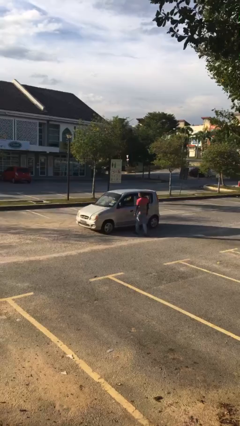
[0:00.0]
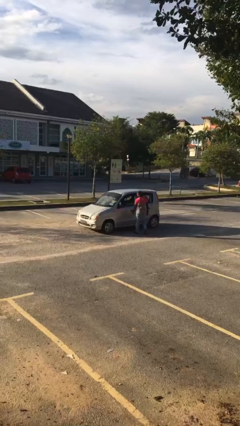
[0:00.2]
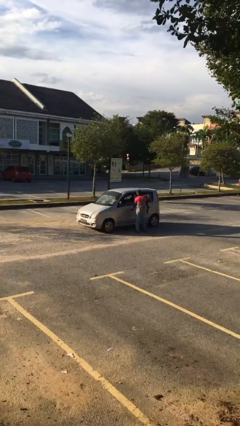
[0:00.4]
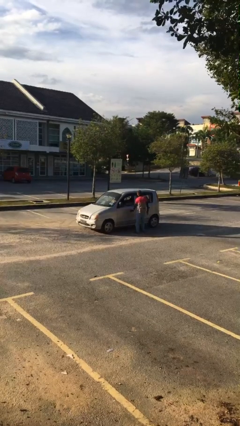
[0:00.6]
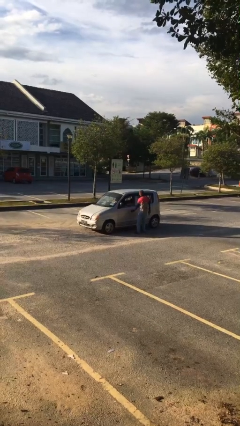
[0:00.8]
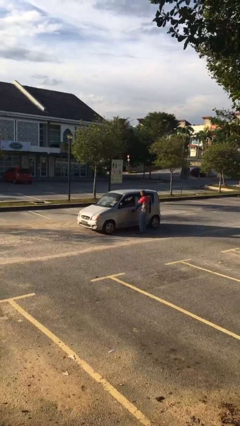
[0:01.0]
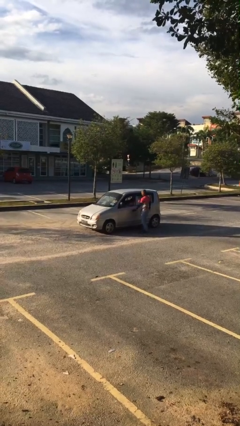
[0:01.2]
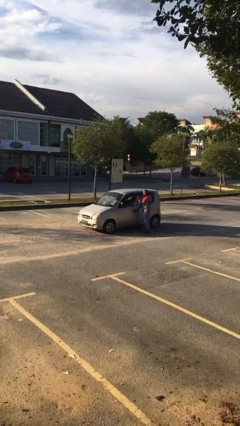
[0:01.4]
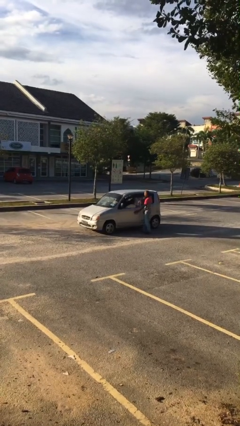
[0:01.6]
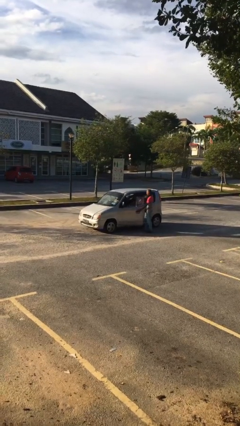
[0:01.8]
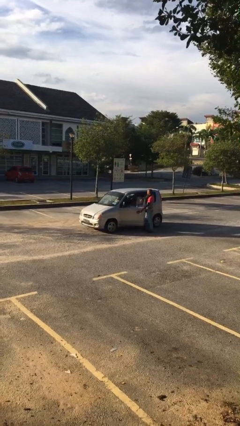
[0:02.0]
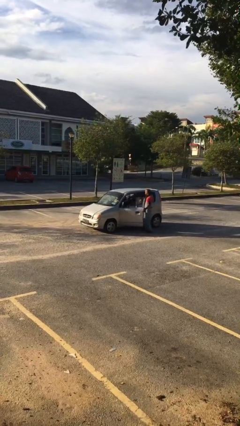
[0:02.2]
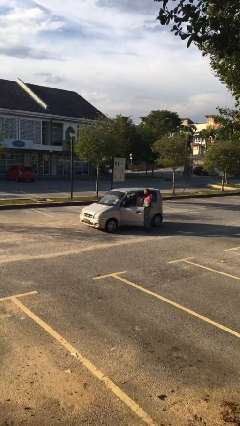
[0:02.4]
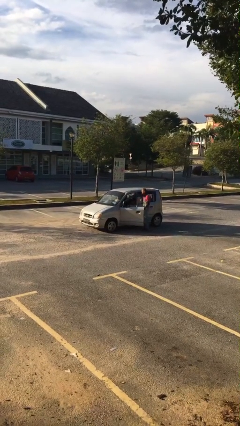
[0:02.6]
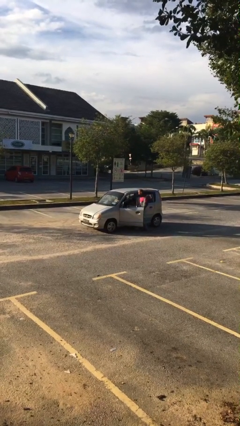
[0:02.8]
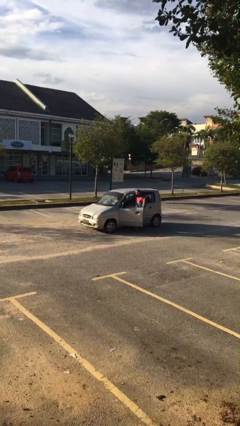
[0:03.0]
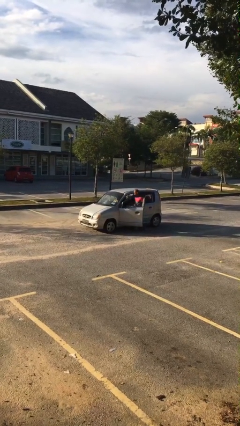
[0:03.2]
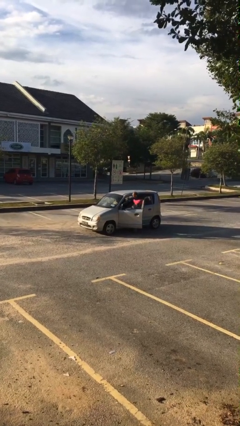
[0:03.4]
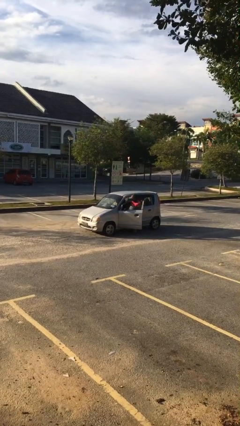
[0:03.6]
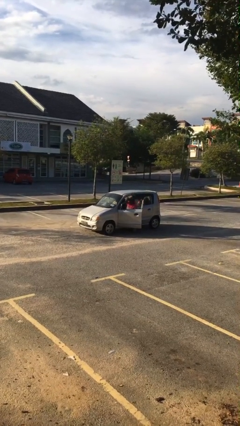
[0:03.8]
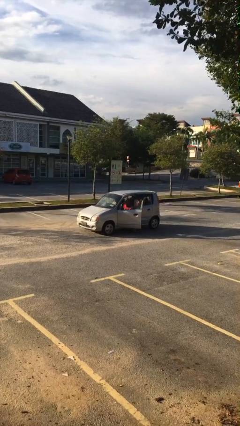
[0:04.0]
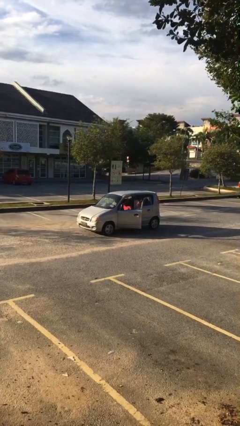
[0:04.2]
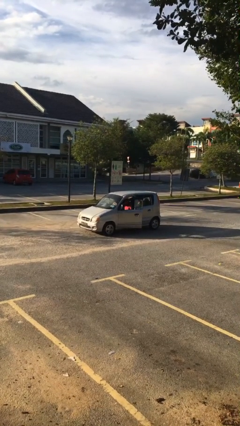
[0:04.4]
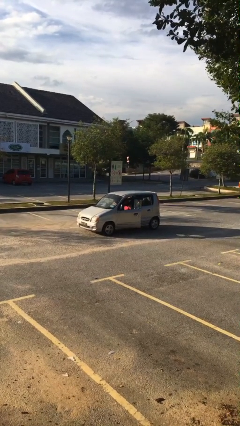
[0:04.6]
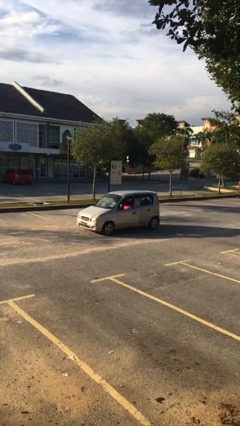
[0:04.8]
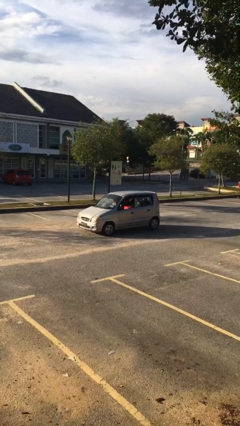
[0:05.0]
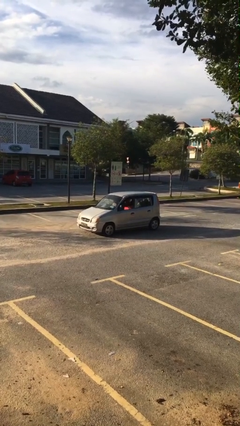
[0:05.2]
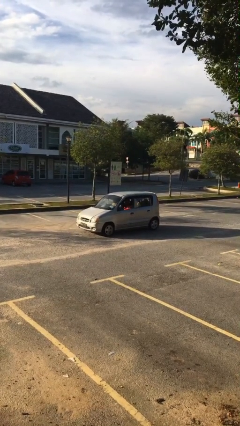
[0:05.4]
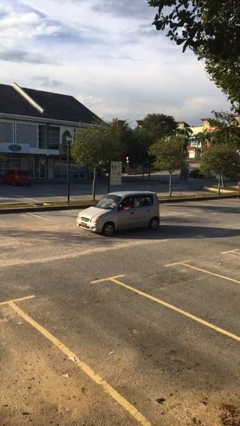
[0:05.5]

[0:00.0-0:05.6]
car picks up person

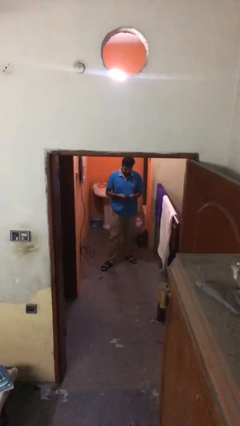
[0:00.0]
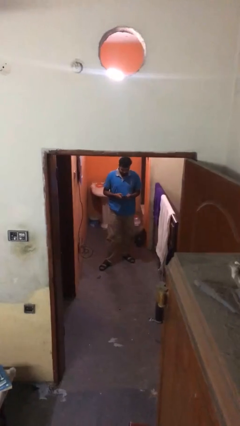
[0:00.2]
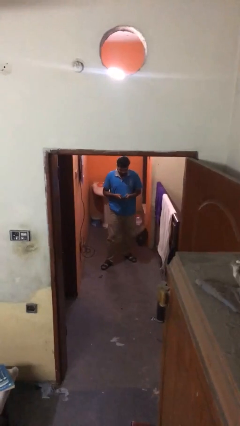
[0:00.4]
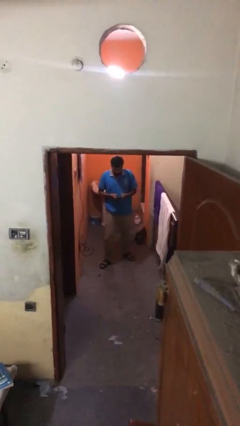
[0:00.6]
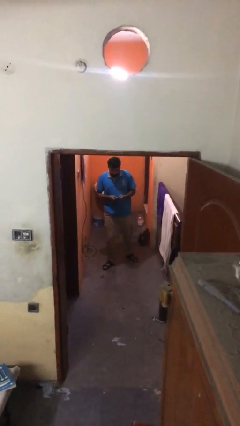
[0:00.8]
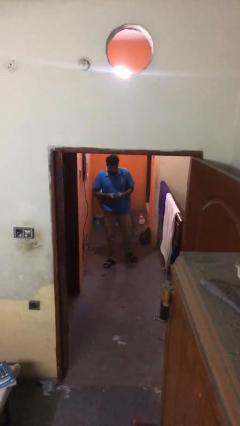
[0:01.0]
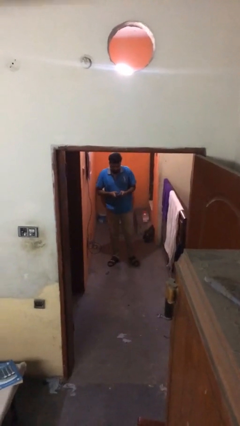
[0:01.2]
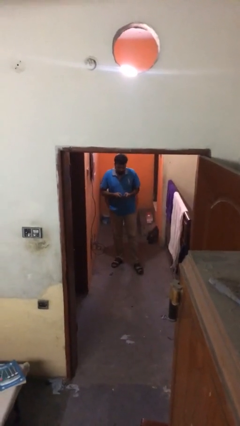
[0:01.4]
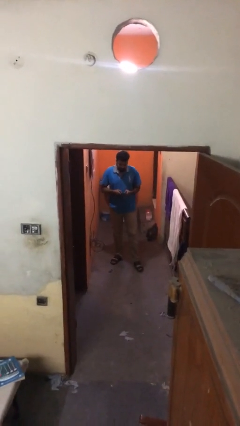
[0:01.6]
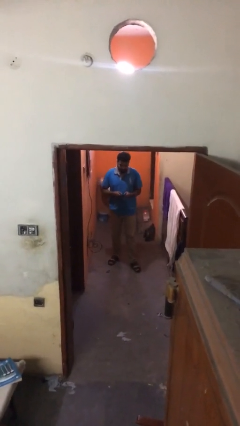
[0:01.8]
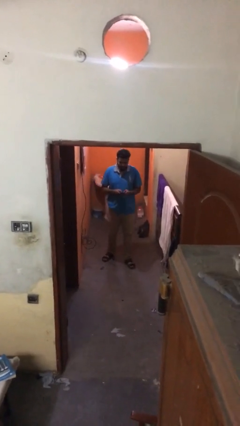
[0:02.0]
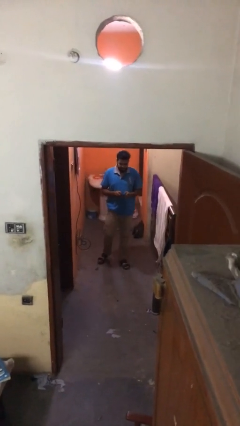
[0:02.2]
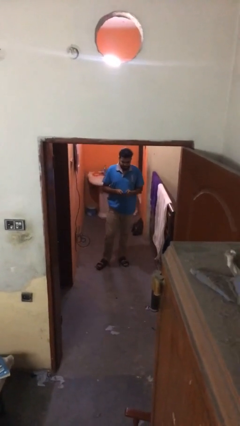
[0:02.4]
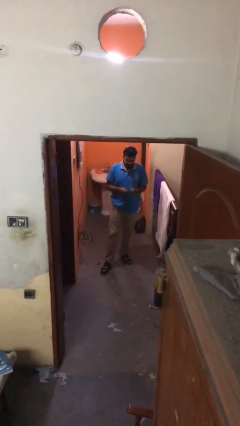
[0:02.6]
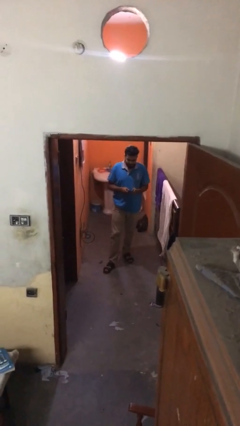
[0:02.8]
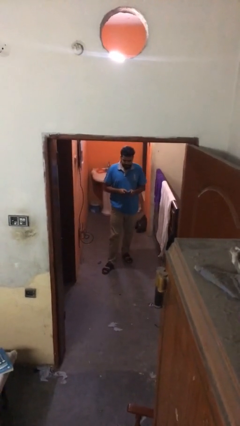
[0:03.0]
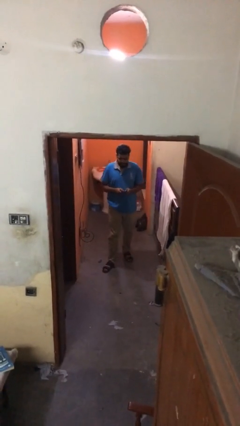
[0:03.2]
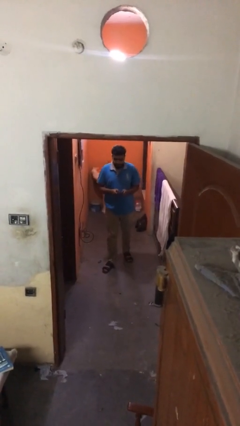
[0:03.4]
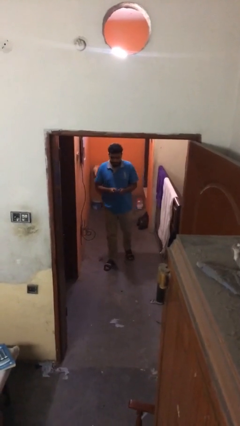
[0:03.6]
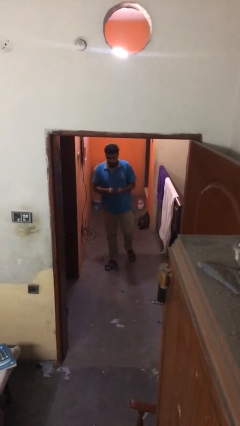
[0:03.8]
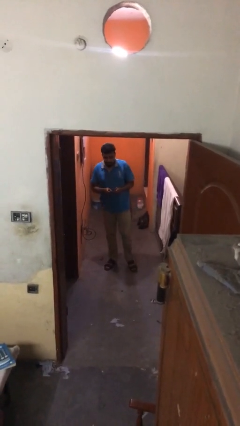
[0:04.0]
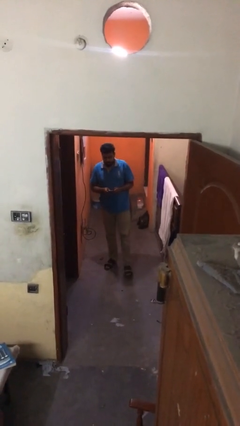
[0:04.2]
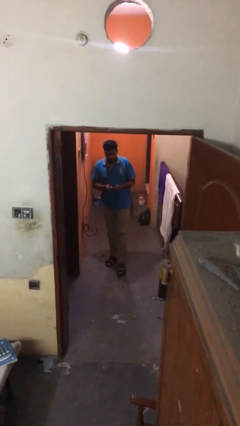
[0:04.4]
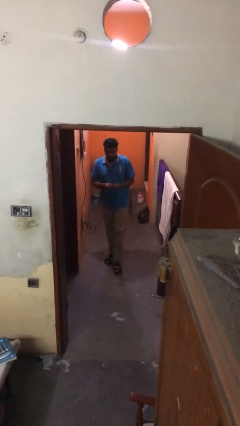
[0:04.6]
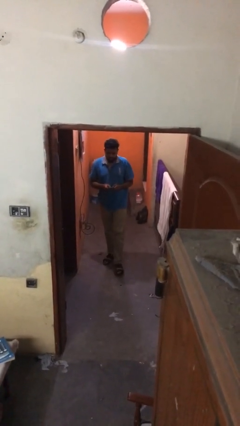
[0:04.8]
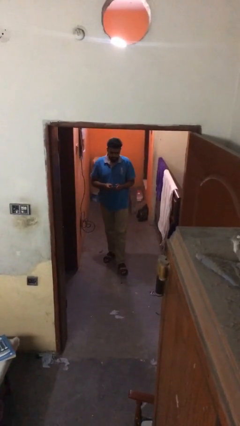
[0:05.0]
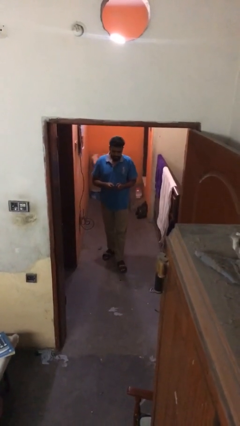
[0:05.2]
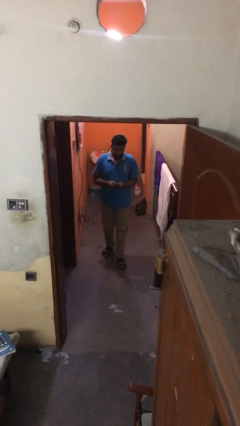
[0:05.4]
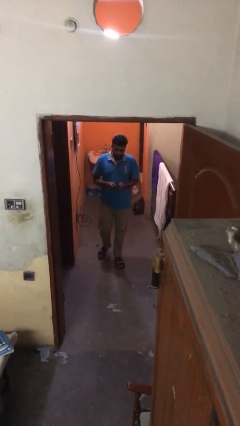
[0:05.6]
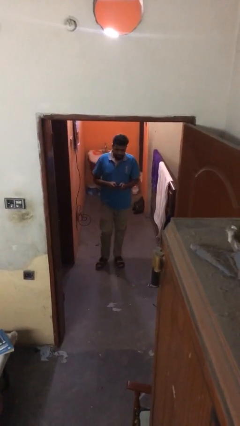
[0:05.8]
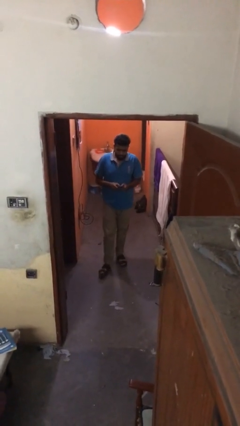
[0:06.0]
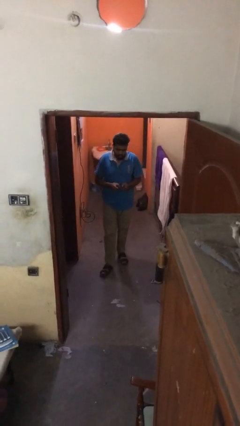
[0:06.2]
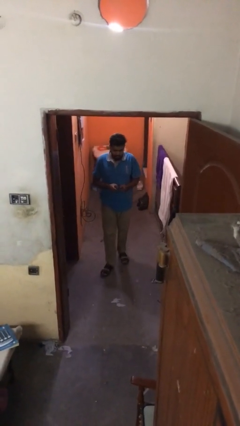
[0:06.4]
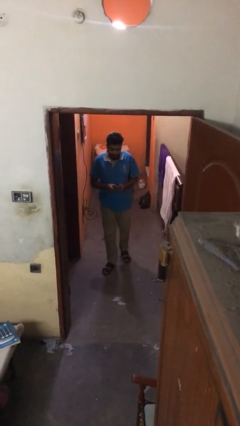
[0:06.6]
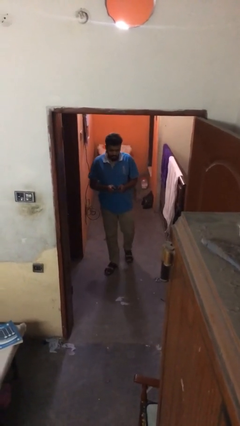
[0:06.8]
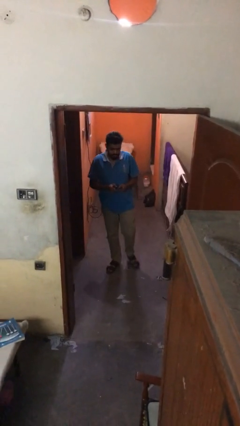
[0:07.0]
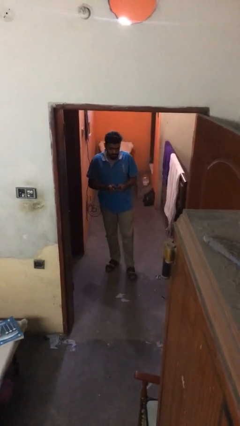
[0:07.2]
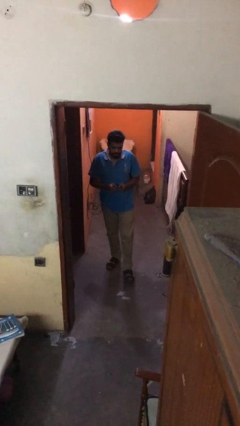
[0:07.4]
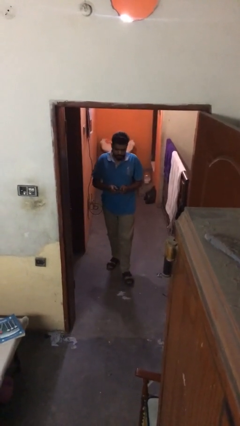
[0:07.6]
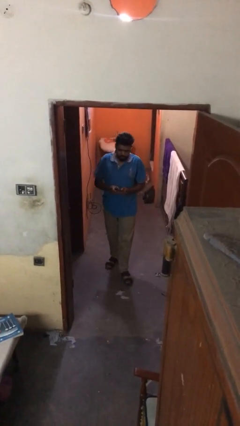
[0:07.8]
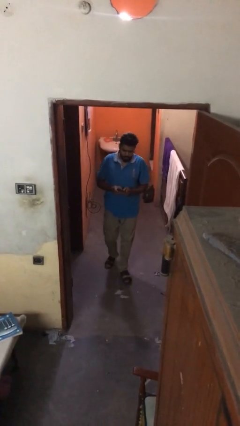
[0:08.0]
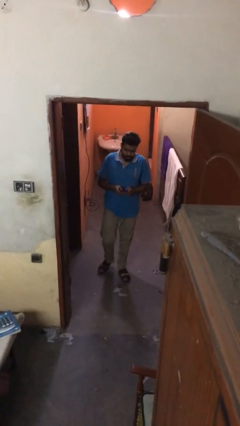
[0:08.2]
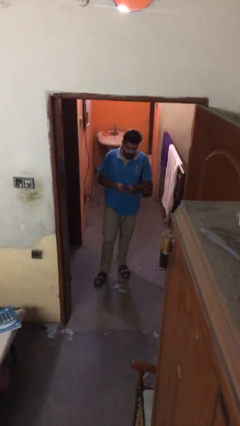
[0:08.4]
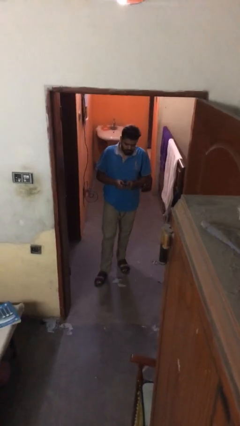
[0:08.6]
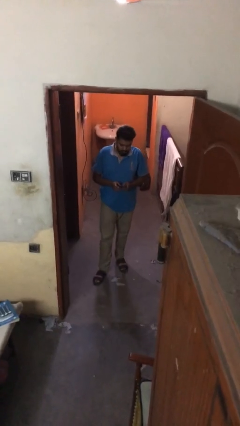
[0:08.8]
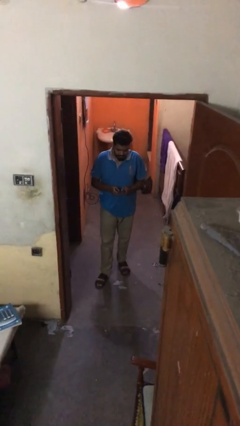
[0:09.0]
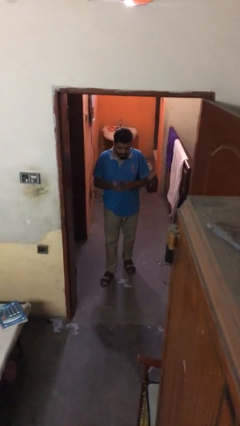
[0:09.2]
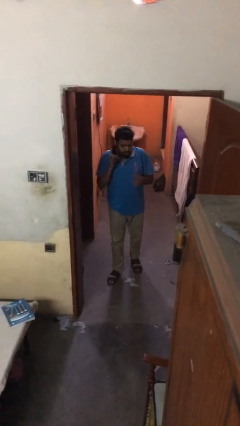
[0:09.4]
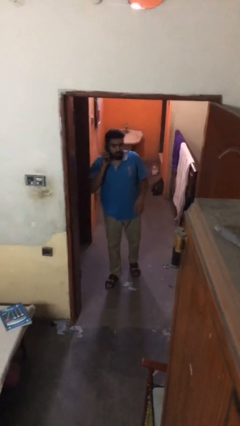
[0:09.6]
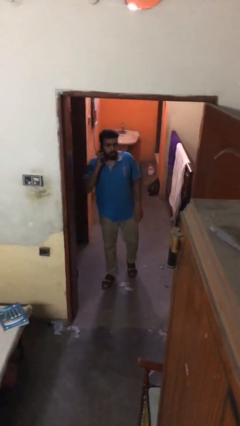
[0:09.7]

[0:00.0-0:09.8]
person texts on phone

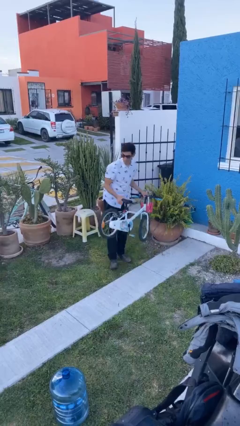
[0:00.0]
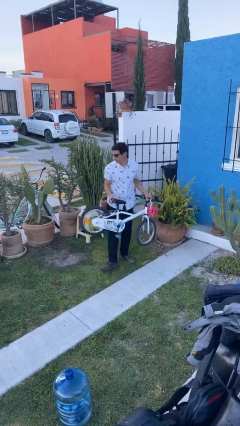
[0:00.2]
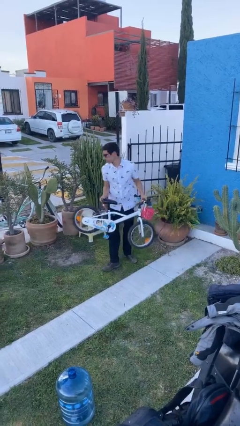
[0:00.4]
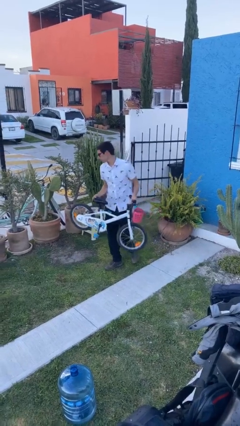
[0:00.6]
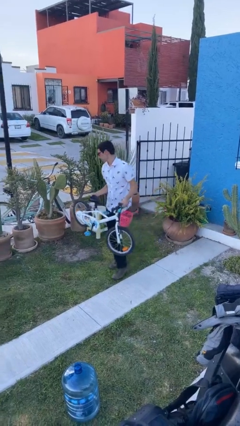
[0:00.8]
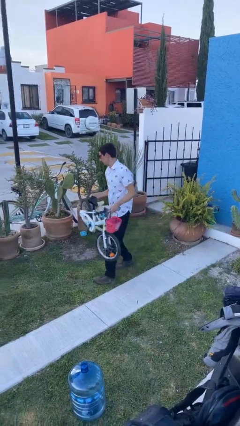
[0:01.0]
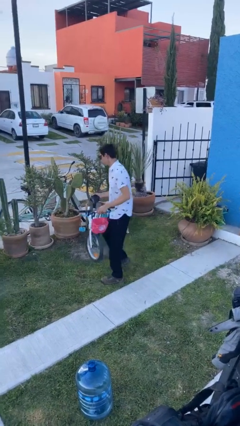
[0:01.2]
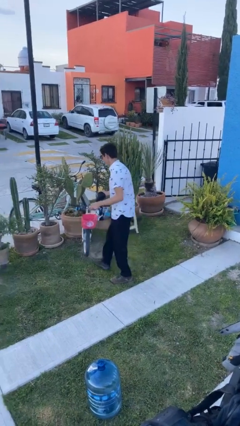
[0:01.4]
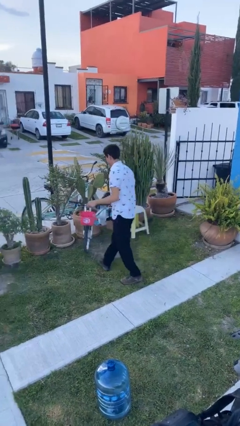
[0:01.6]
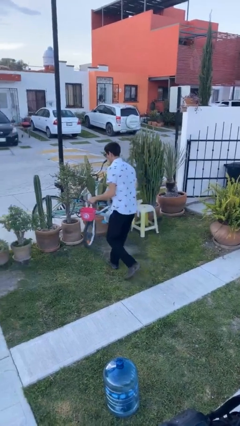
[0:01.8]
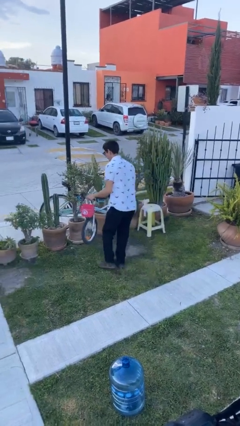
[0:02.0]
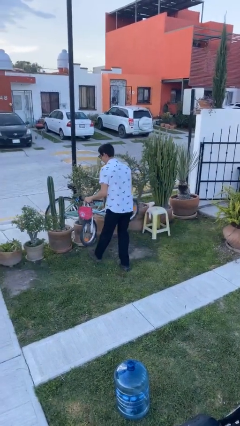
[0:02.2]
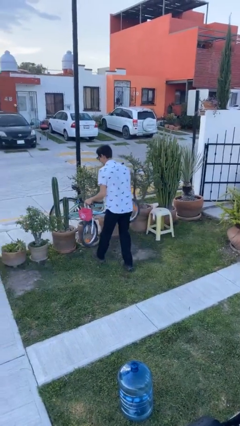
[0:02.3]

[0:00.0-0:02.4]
person carries heavy object
